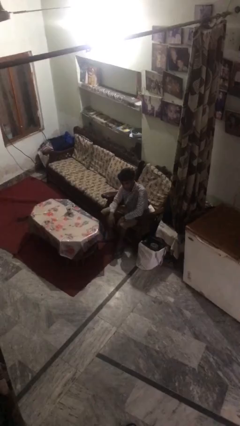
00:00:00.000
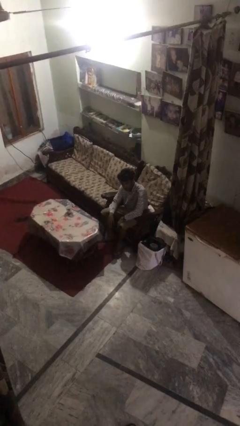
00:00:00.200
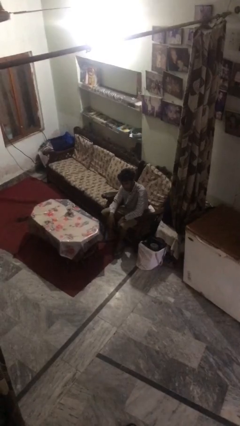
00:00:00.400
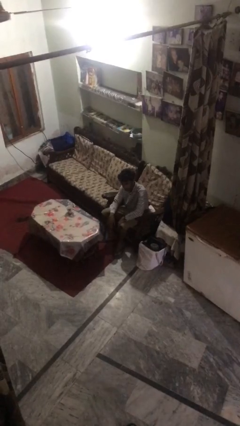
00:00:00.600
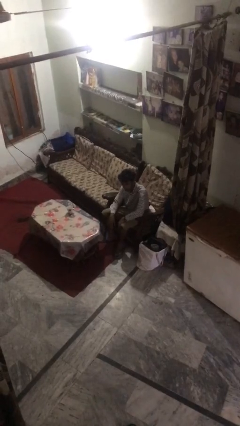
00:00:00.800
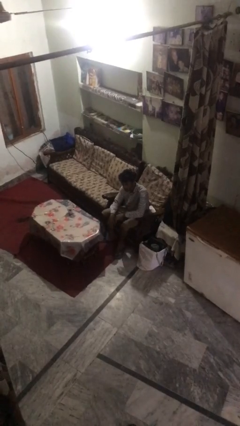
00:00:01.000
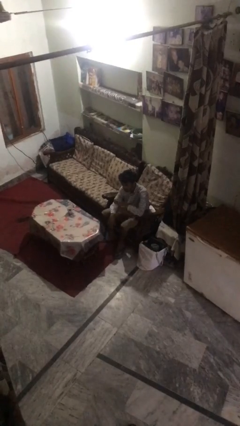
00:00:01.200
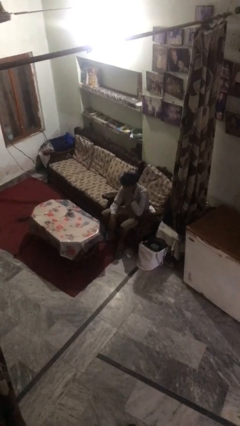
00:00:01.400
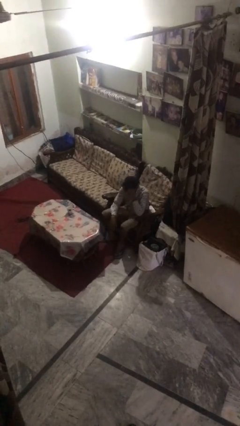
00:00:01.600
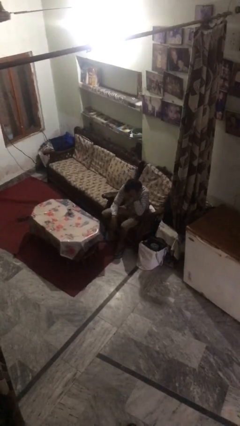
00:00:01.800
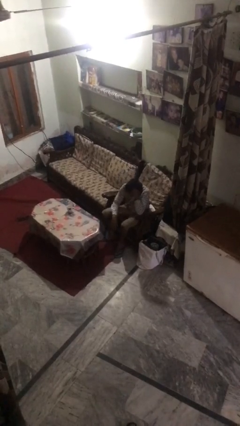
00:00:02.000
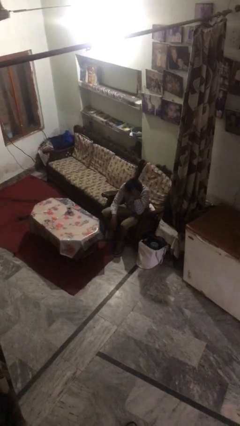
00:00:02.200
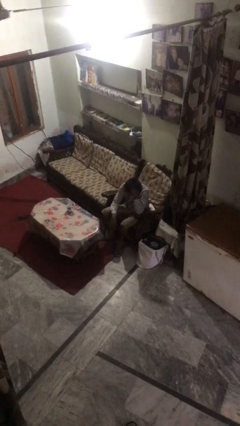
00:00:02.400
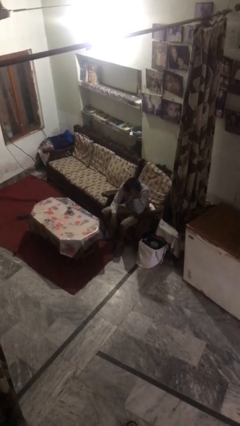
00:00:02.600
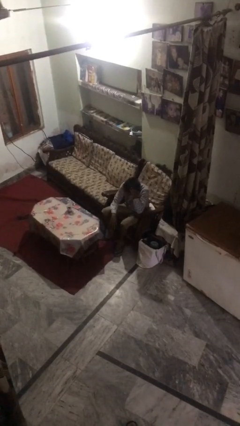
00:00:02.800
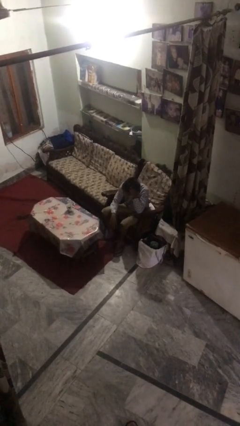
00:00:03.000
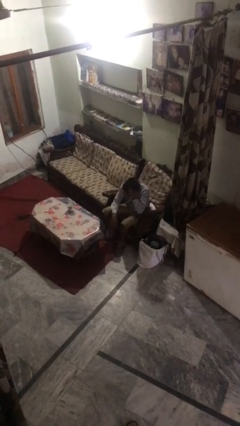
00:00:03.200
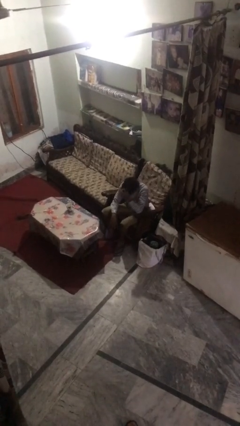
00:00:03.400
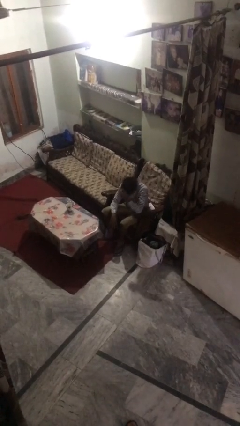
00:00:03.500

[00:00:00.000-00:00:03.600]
person strokes hair

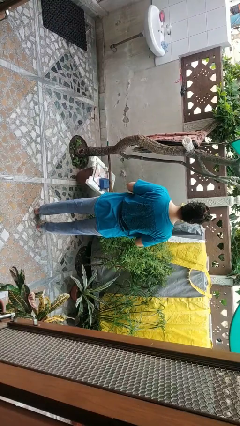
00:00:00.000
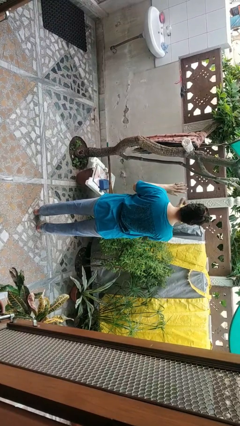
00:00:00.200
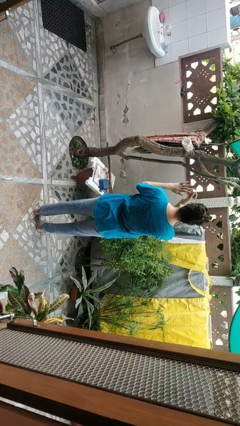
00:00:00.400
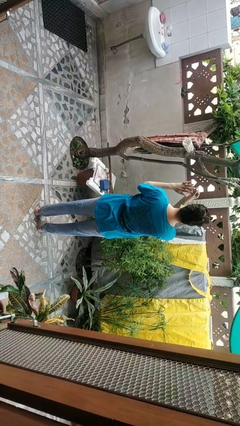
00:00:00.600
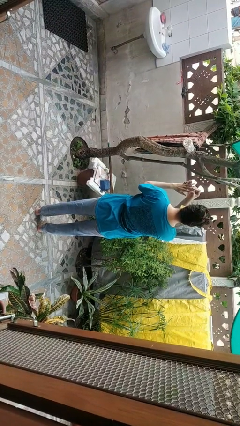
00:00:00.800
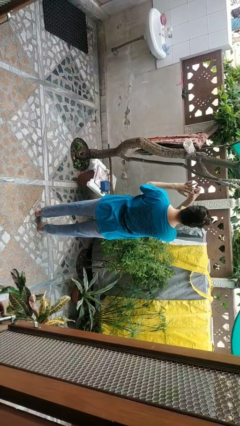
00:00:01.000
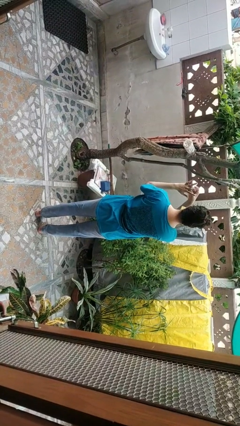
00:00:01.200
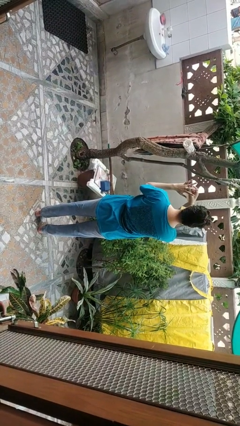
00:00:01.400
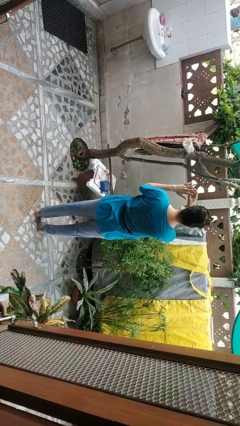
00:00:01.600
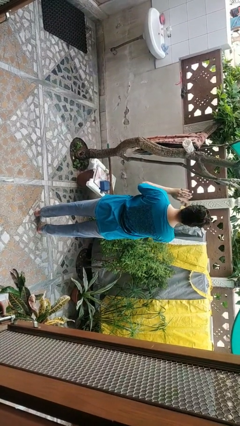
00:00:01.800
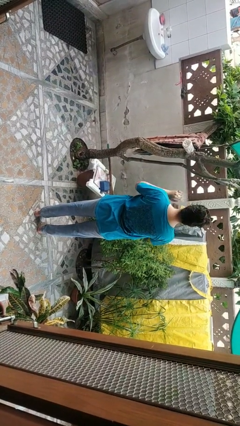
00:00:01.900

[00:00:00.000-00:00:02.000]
person puts on ring

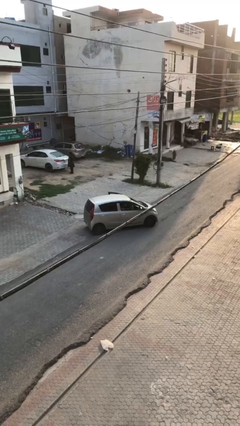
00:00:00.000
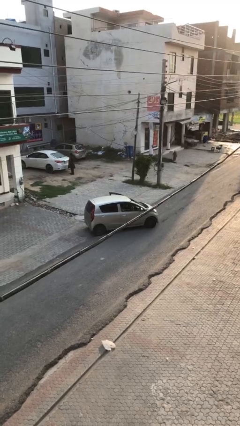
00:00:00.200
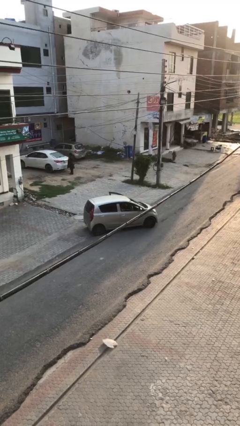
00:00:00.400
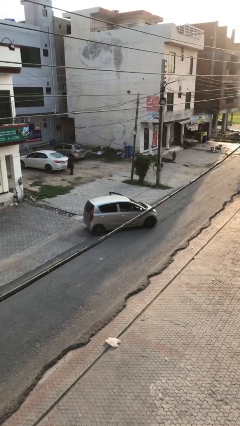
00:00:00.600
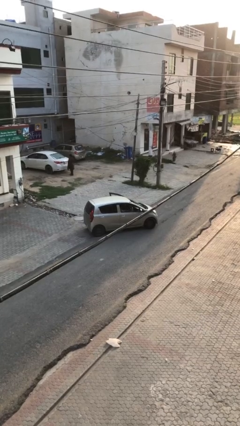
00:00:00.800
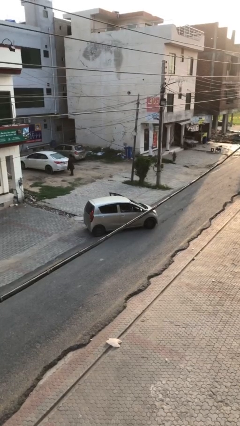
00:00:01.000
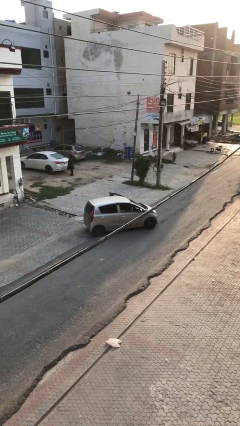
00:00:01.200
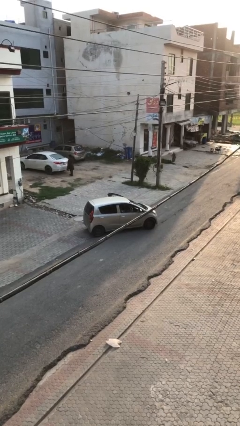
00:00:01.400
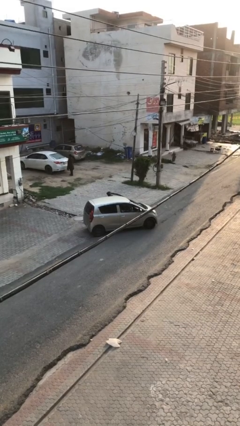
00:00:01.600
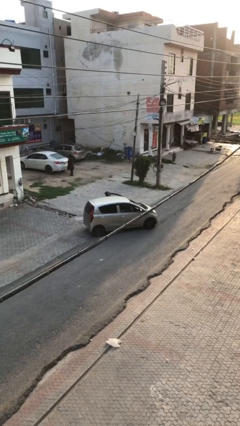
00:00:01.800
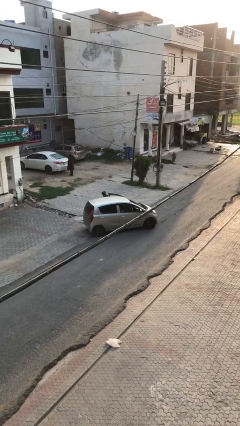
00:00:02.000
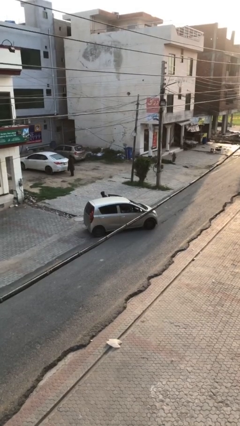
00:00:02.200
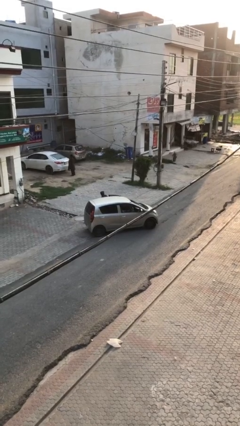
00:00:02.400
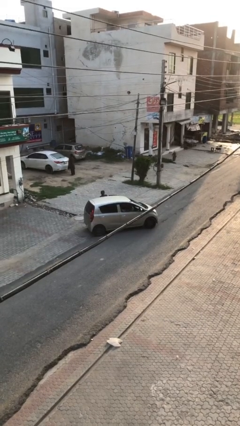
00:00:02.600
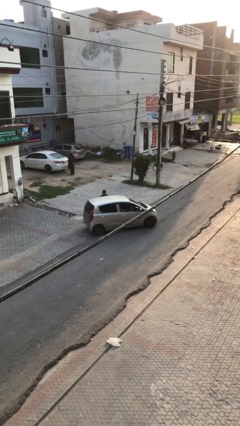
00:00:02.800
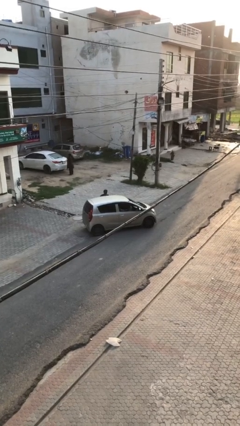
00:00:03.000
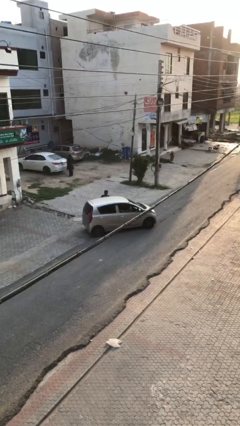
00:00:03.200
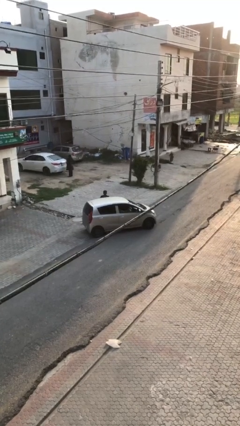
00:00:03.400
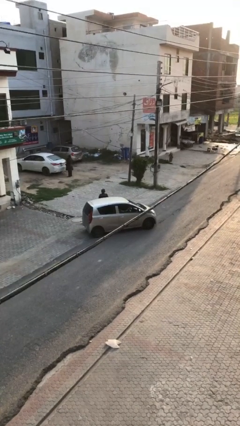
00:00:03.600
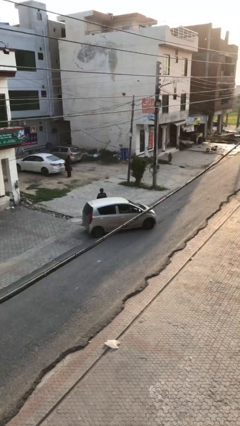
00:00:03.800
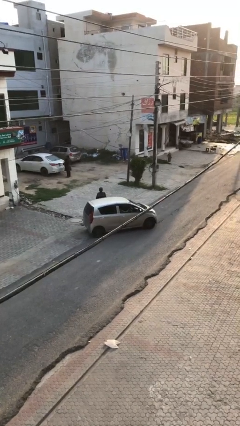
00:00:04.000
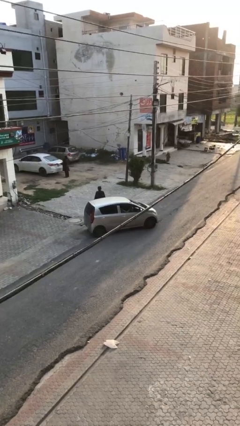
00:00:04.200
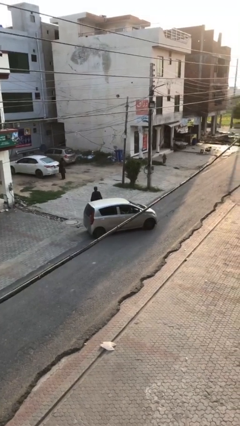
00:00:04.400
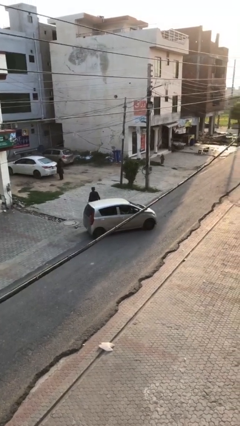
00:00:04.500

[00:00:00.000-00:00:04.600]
car drops off person

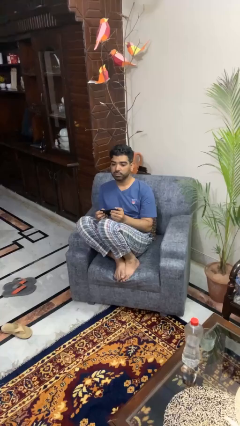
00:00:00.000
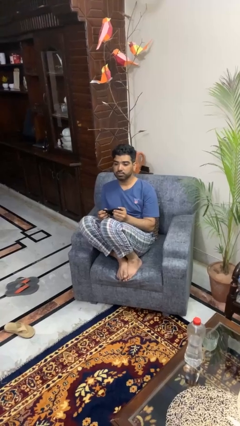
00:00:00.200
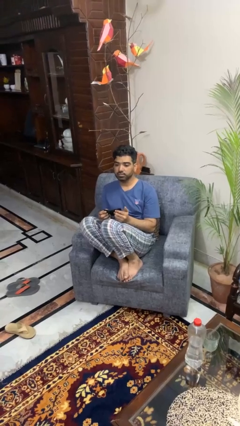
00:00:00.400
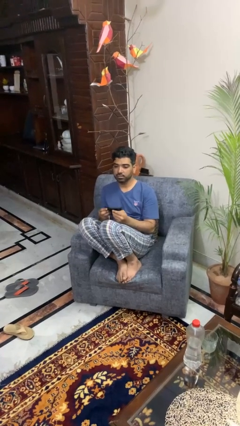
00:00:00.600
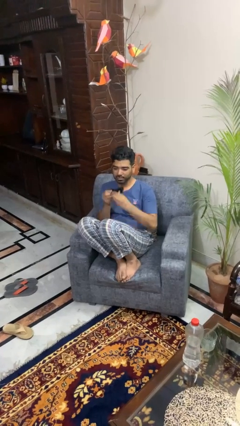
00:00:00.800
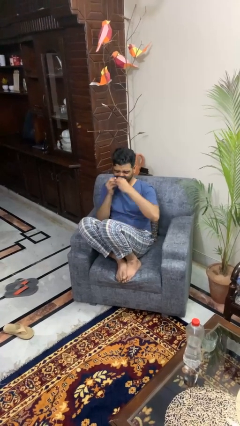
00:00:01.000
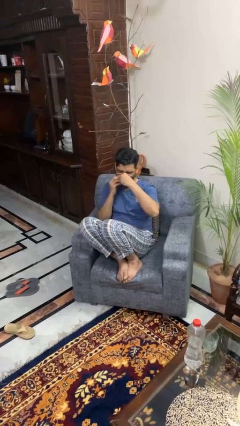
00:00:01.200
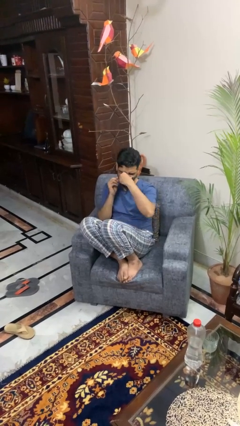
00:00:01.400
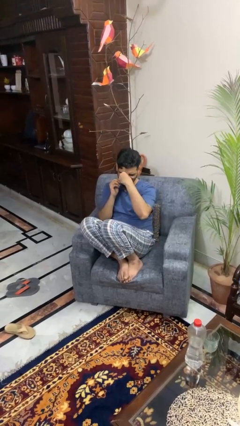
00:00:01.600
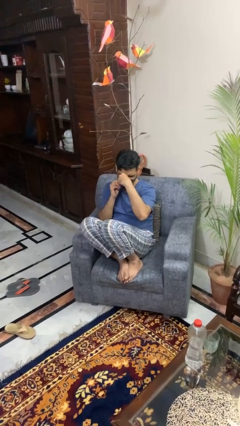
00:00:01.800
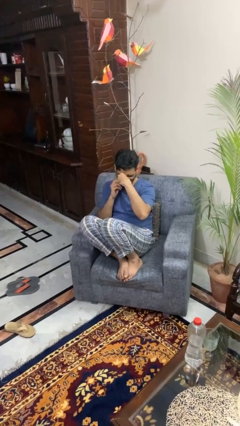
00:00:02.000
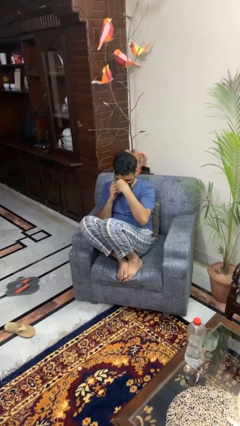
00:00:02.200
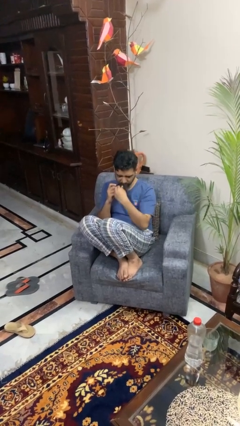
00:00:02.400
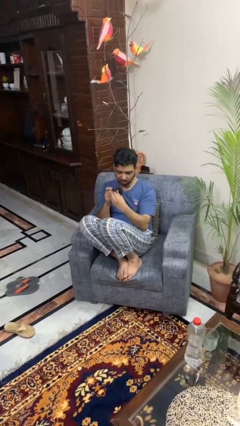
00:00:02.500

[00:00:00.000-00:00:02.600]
person blows nose

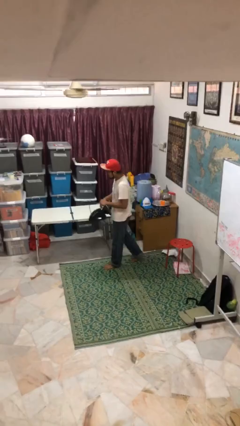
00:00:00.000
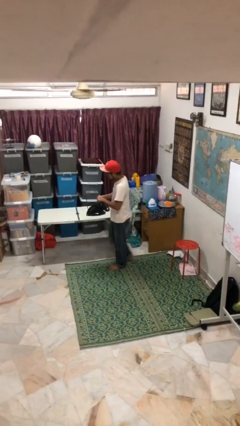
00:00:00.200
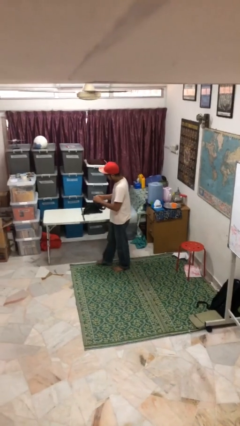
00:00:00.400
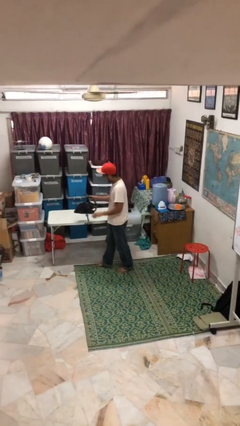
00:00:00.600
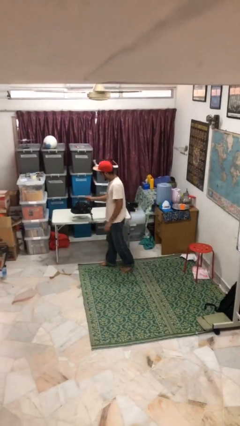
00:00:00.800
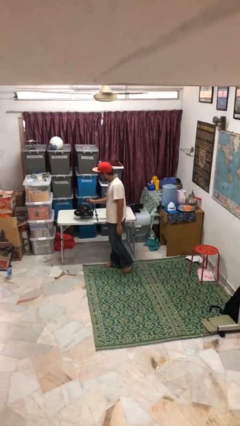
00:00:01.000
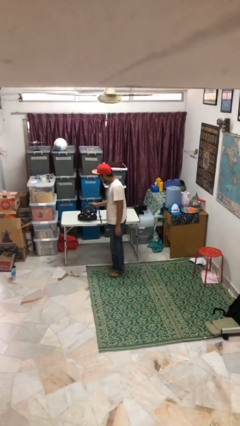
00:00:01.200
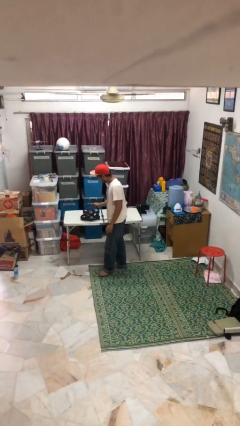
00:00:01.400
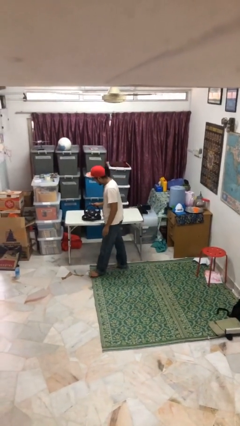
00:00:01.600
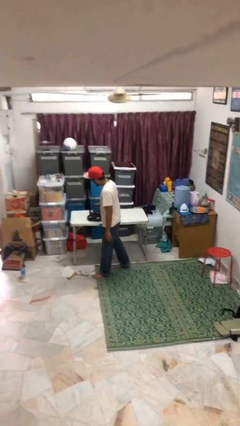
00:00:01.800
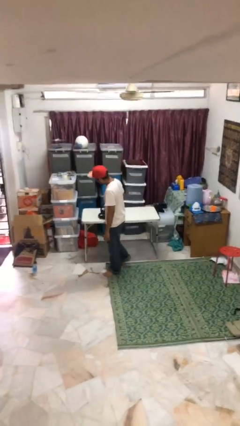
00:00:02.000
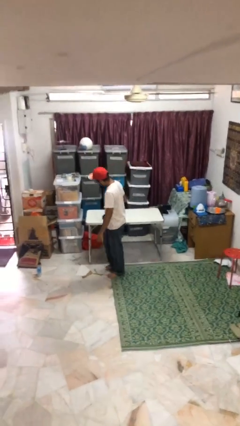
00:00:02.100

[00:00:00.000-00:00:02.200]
person puts down object on table

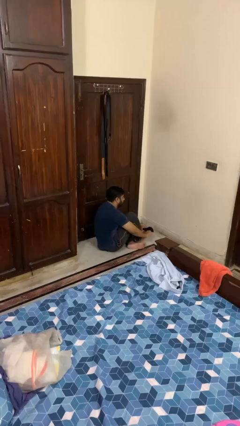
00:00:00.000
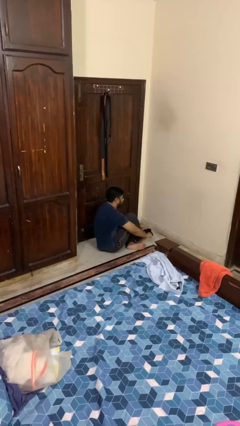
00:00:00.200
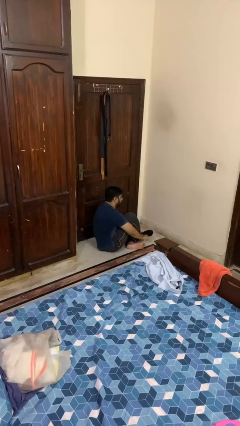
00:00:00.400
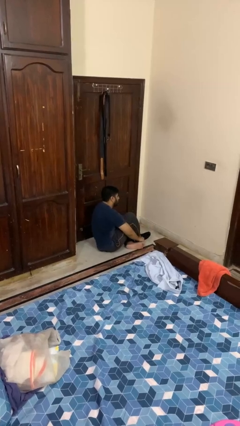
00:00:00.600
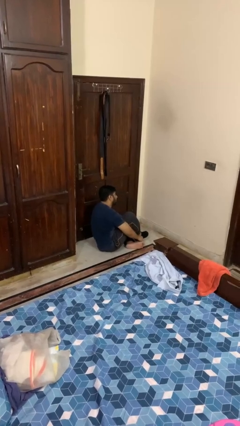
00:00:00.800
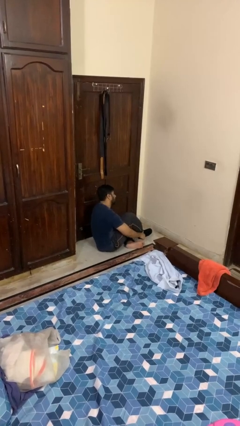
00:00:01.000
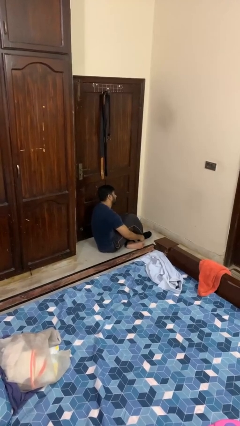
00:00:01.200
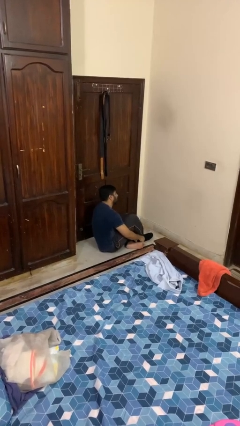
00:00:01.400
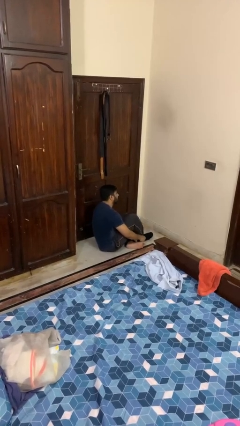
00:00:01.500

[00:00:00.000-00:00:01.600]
person puts on socks

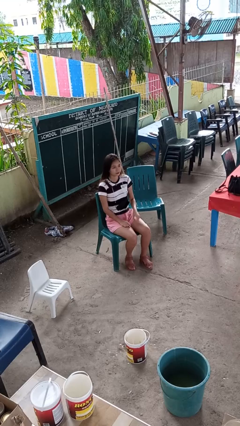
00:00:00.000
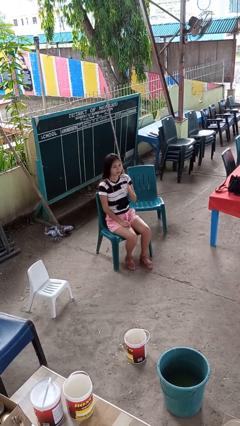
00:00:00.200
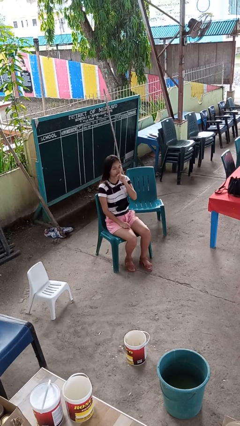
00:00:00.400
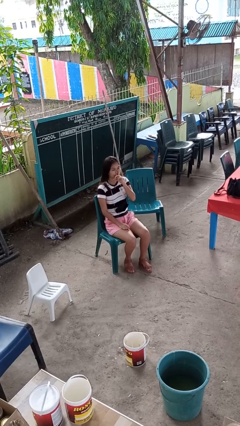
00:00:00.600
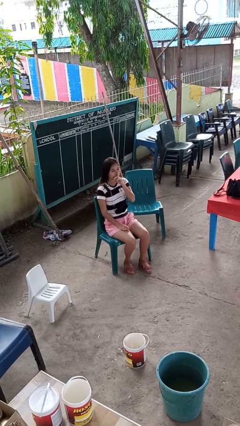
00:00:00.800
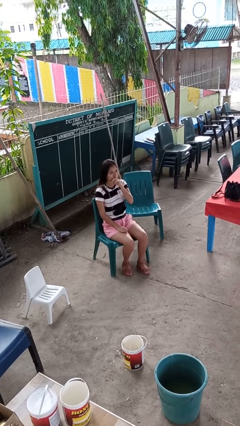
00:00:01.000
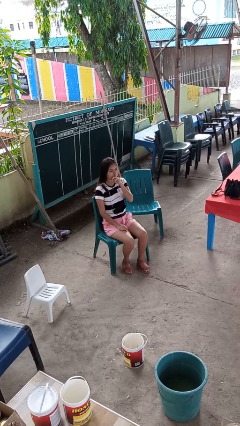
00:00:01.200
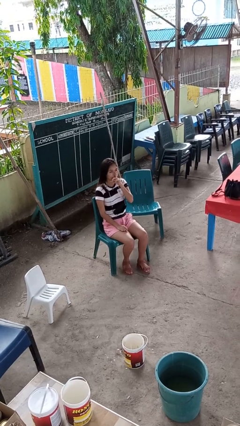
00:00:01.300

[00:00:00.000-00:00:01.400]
person gestures be quiet
